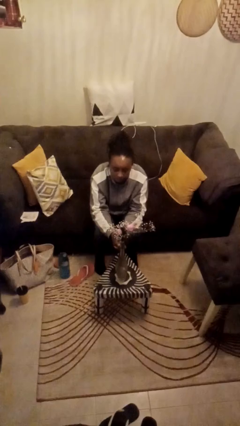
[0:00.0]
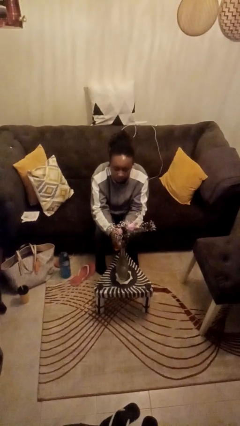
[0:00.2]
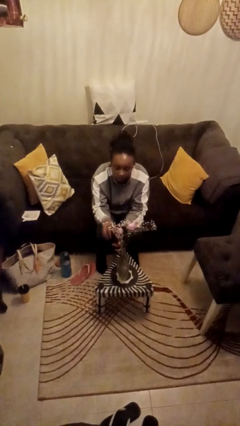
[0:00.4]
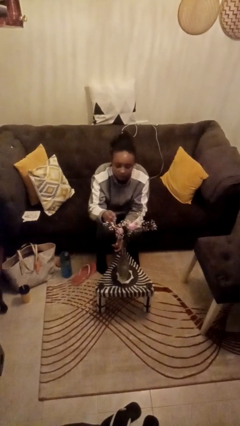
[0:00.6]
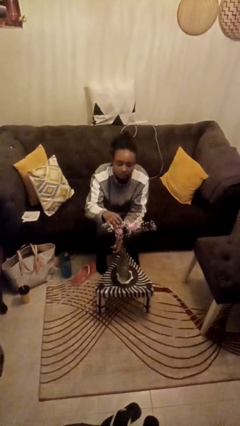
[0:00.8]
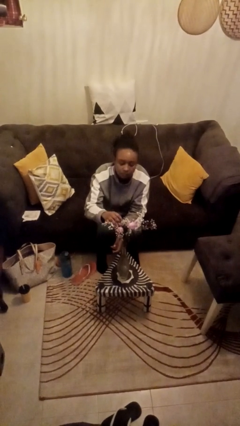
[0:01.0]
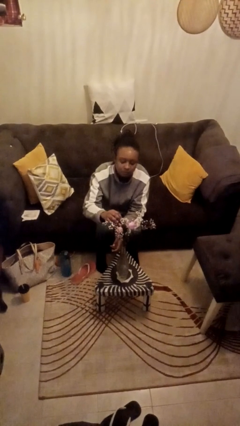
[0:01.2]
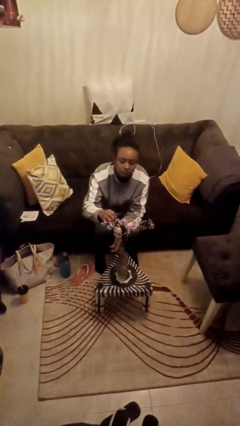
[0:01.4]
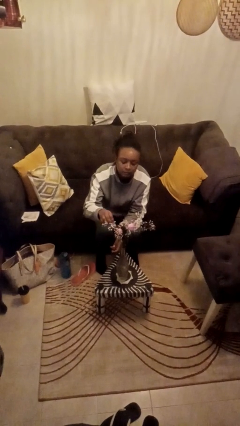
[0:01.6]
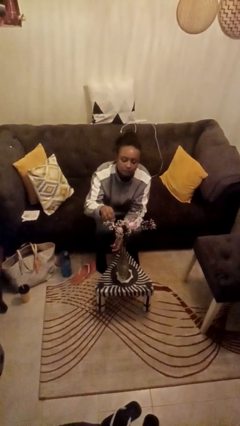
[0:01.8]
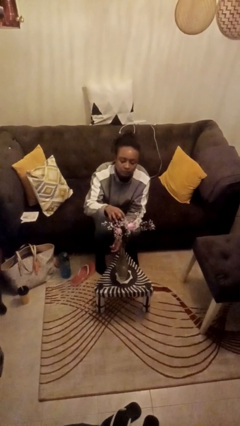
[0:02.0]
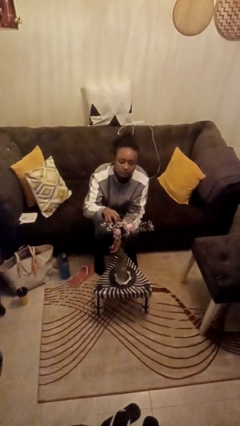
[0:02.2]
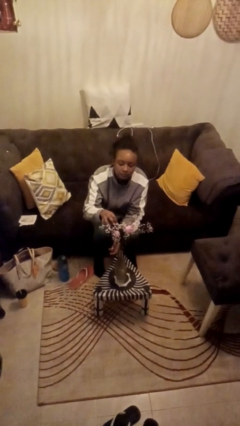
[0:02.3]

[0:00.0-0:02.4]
person arranges flowers in vase

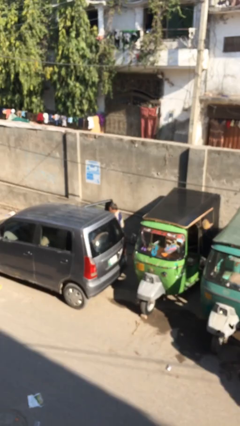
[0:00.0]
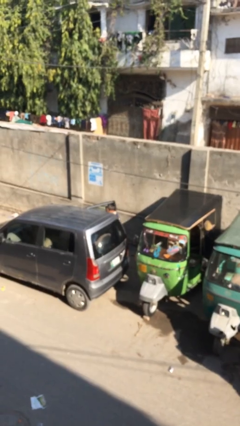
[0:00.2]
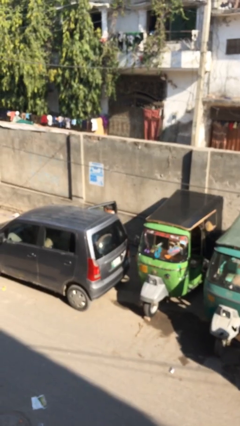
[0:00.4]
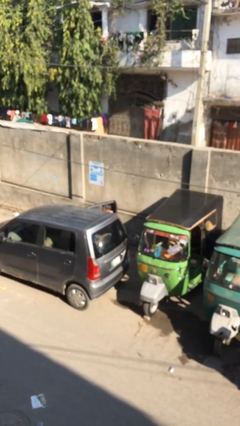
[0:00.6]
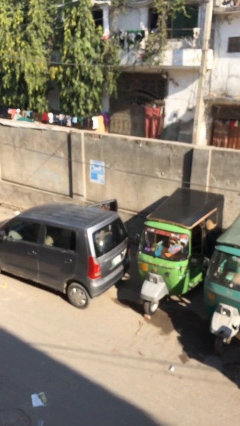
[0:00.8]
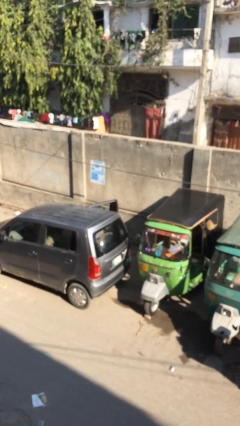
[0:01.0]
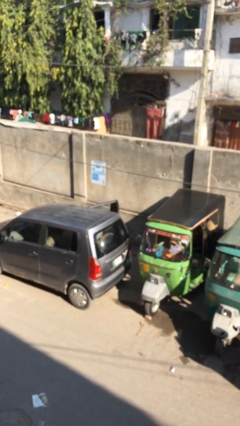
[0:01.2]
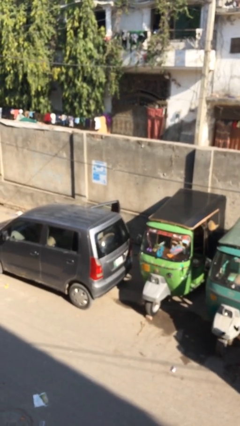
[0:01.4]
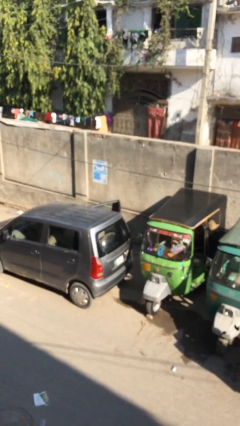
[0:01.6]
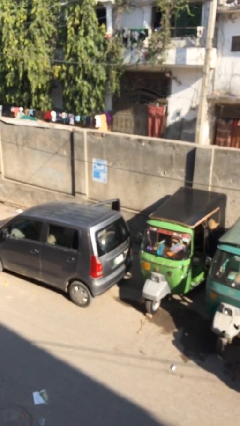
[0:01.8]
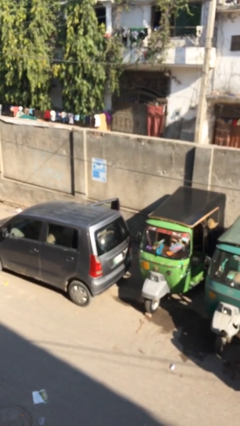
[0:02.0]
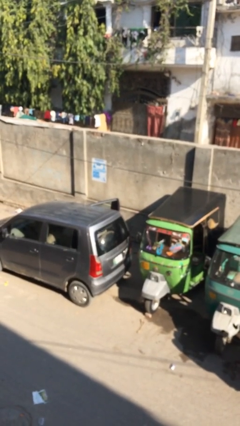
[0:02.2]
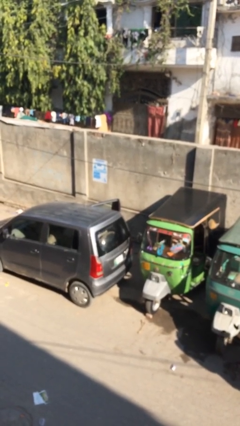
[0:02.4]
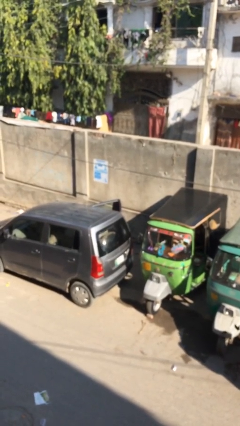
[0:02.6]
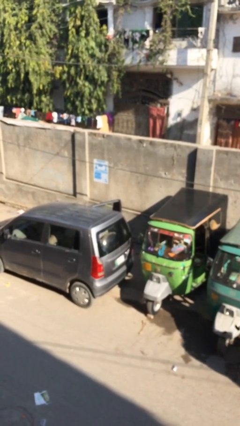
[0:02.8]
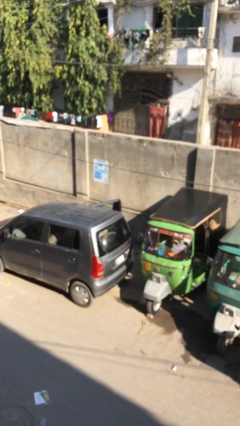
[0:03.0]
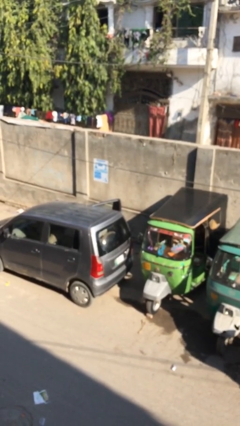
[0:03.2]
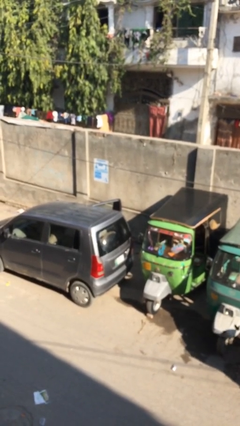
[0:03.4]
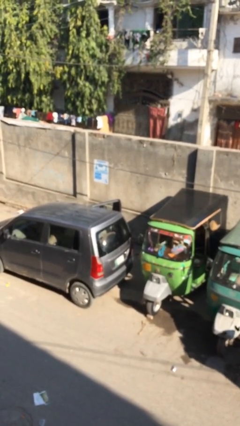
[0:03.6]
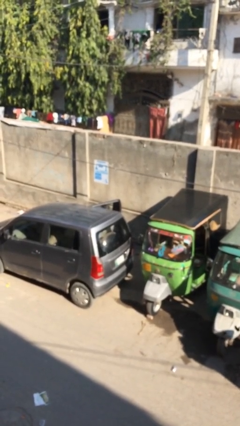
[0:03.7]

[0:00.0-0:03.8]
person enters car

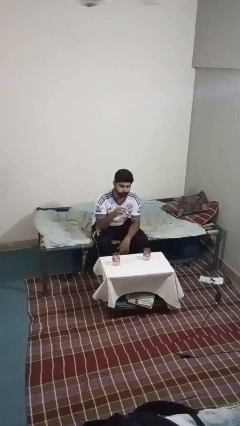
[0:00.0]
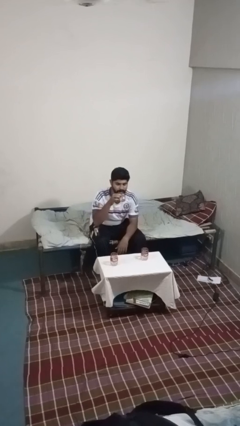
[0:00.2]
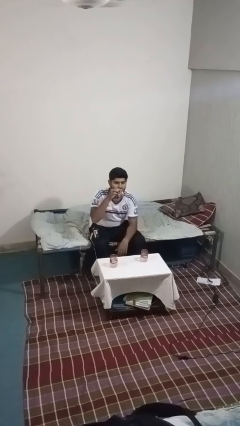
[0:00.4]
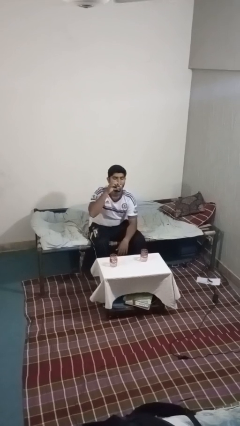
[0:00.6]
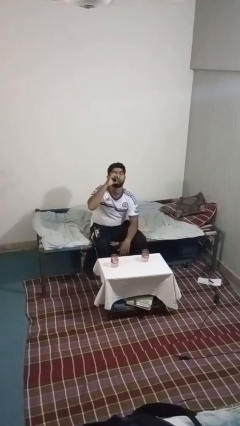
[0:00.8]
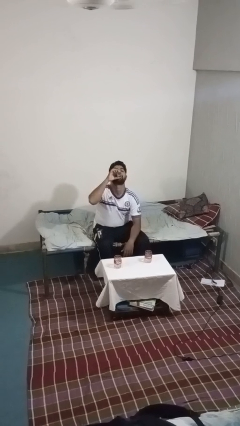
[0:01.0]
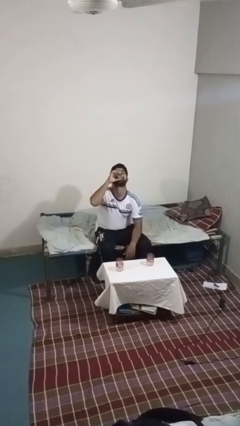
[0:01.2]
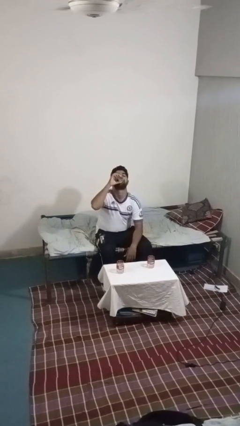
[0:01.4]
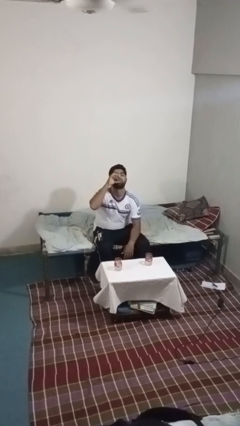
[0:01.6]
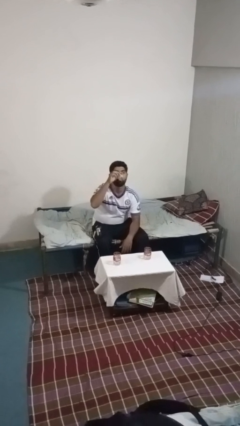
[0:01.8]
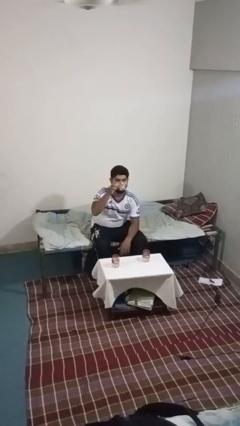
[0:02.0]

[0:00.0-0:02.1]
person drinks from shotglass

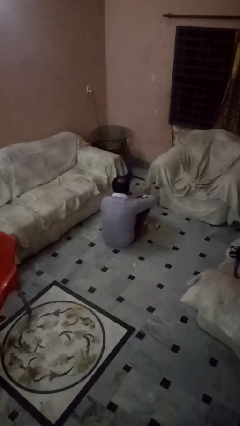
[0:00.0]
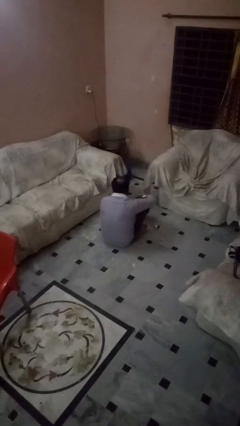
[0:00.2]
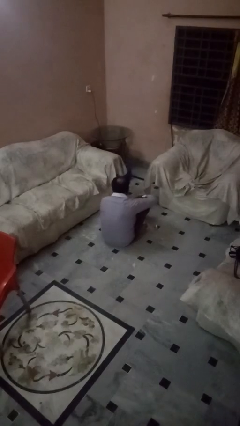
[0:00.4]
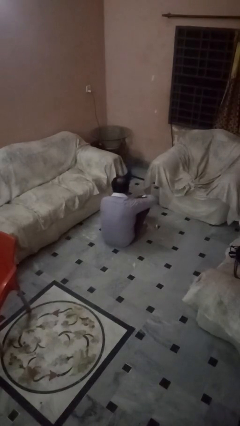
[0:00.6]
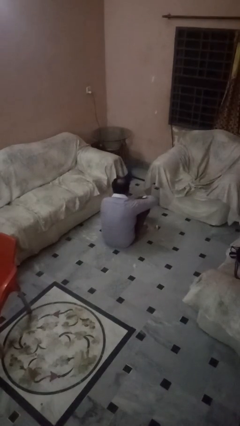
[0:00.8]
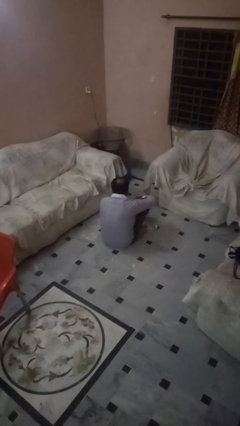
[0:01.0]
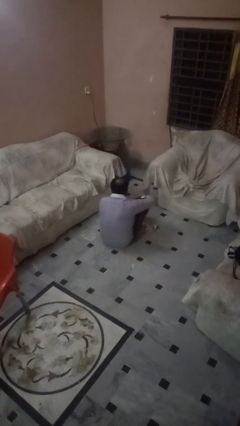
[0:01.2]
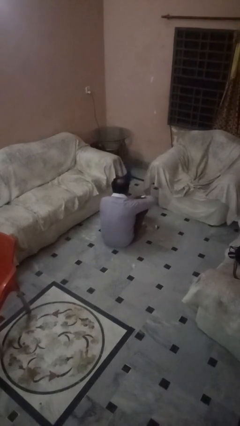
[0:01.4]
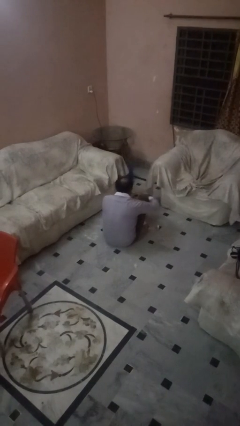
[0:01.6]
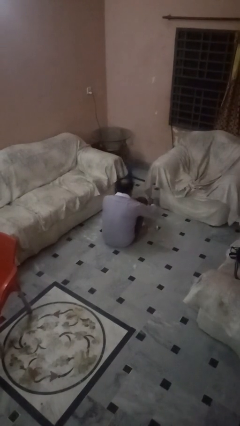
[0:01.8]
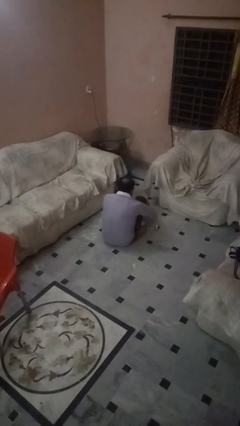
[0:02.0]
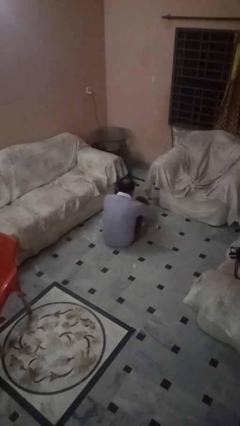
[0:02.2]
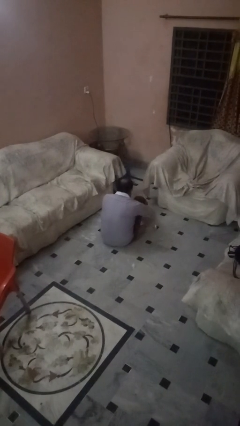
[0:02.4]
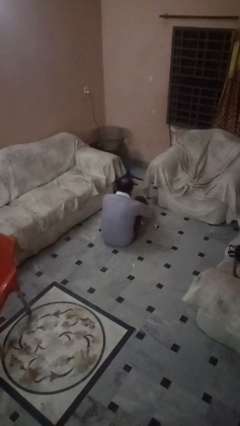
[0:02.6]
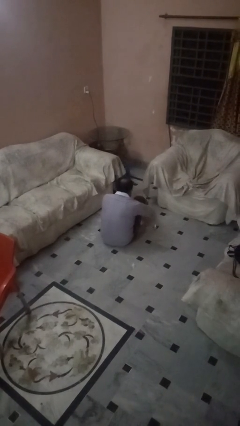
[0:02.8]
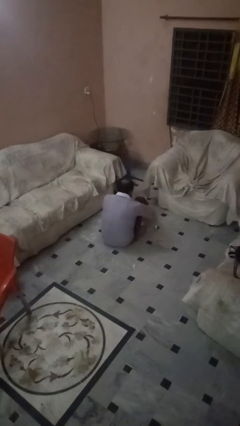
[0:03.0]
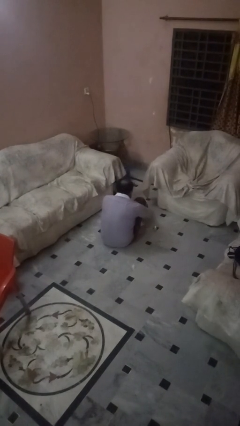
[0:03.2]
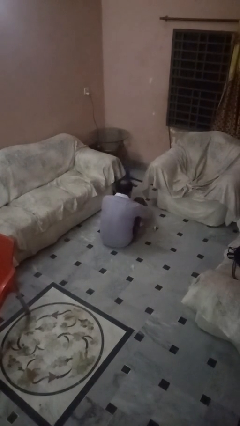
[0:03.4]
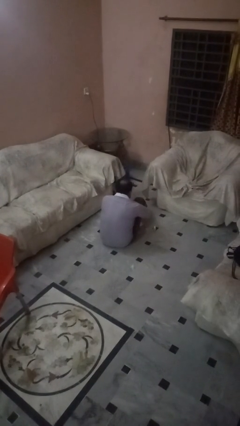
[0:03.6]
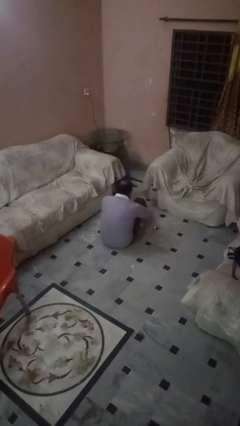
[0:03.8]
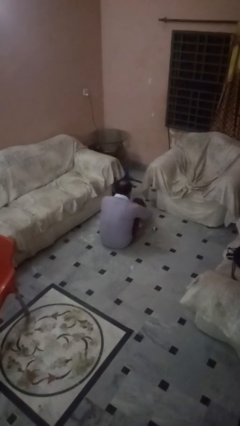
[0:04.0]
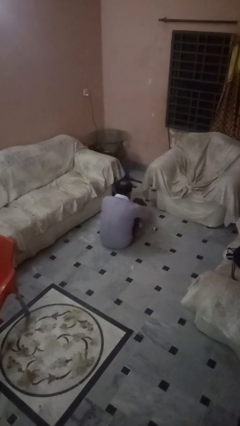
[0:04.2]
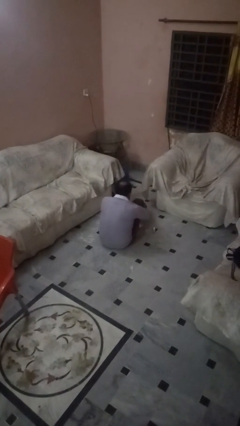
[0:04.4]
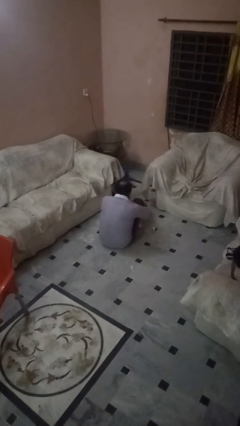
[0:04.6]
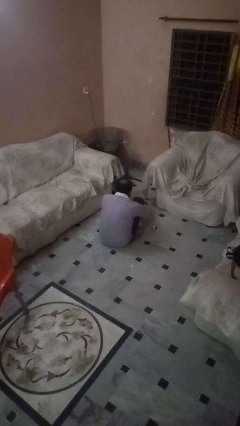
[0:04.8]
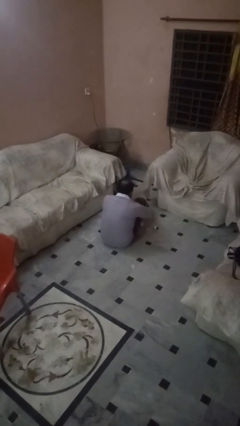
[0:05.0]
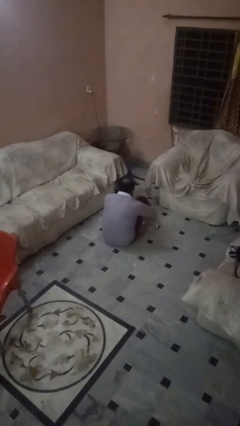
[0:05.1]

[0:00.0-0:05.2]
person rubs foot

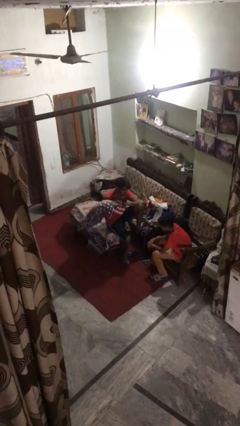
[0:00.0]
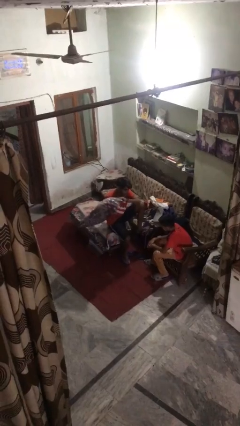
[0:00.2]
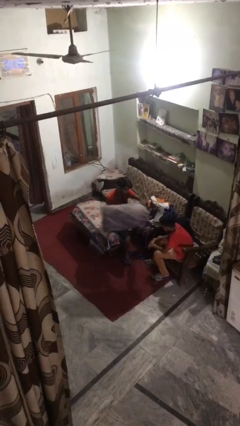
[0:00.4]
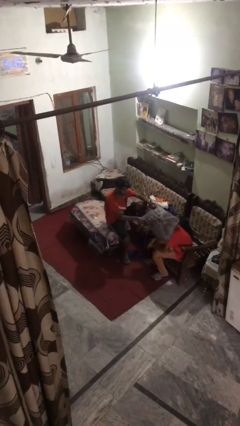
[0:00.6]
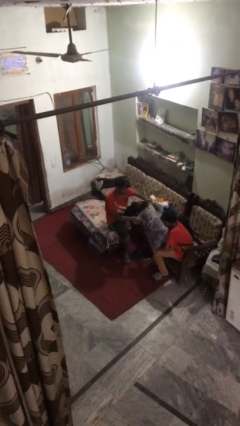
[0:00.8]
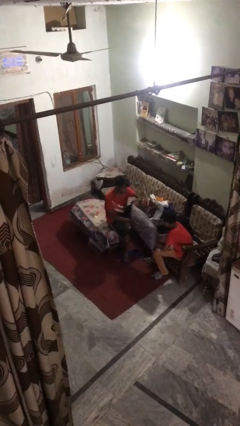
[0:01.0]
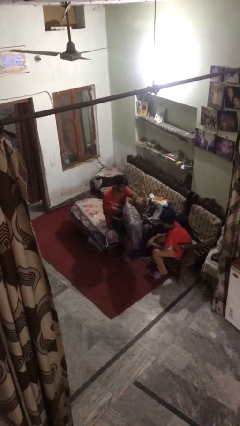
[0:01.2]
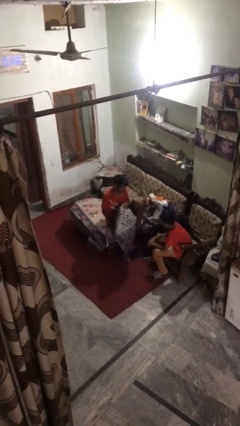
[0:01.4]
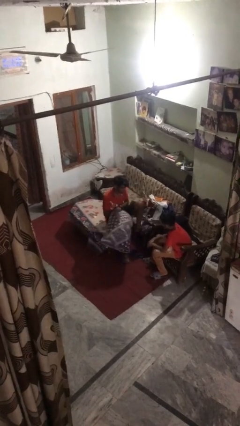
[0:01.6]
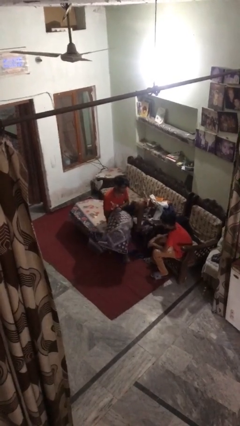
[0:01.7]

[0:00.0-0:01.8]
person hits person with pillow

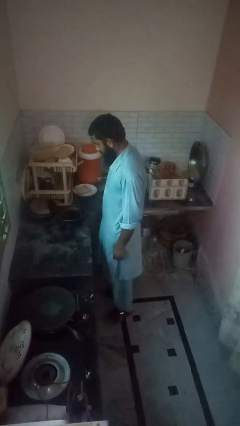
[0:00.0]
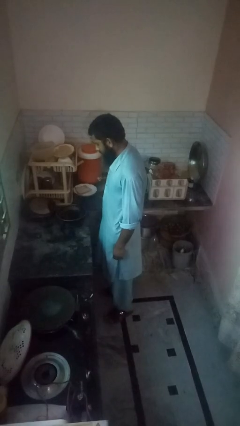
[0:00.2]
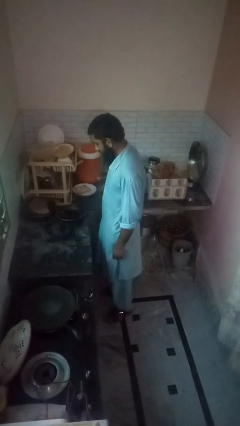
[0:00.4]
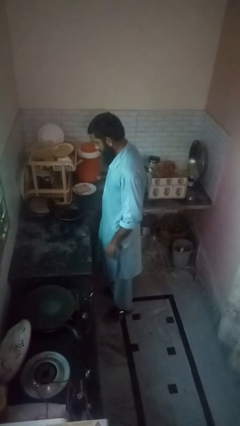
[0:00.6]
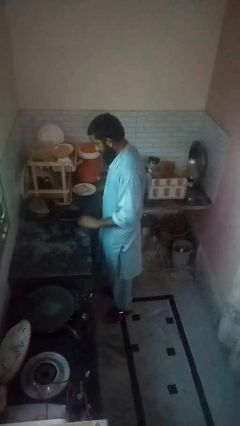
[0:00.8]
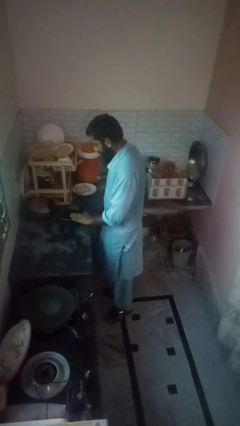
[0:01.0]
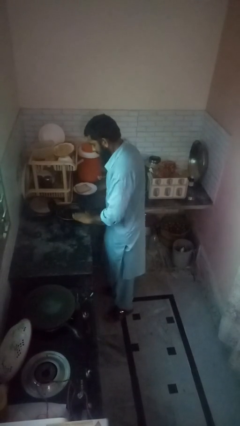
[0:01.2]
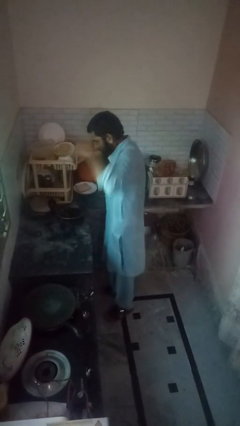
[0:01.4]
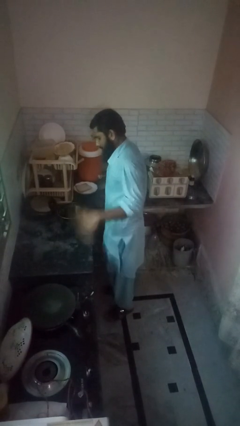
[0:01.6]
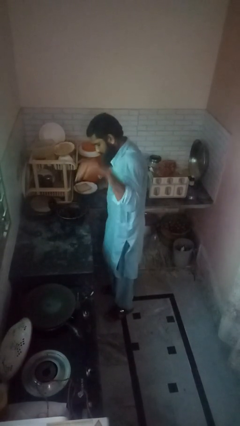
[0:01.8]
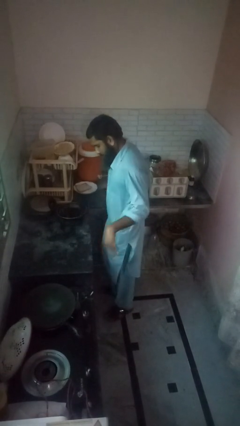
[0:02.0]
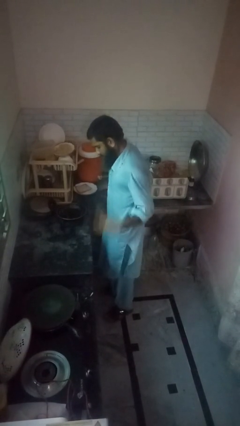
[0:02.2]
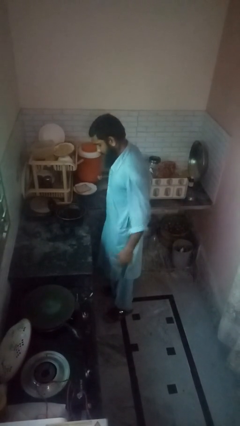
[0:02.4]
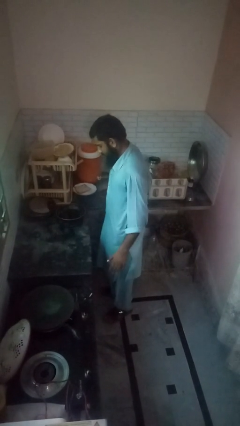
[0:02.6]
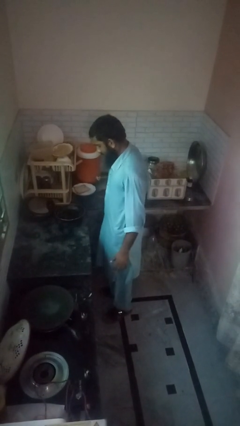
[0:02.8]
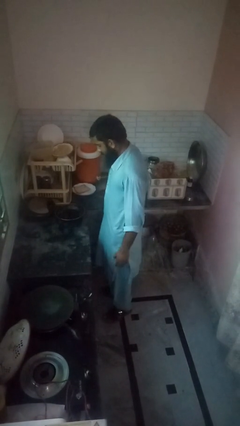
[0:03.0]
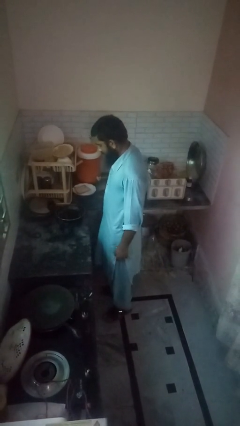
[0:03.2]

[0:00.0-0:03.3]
person burns hand
